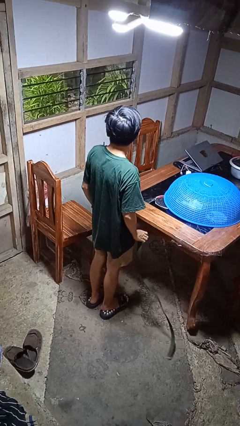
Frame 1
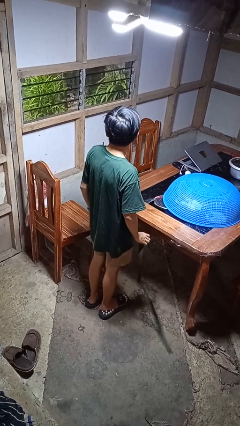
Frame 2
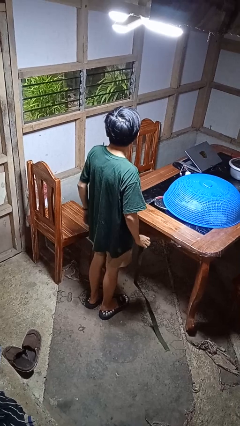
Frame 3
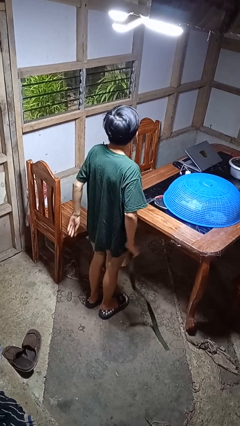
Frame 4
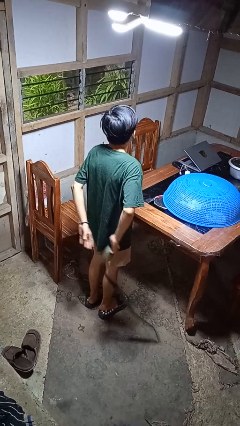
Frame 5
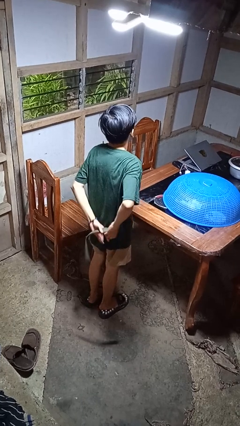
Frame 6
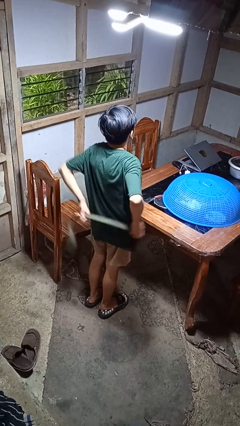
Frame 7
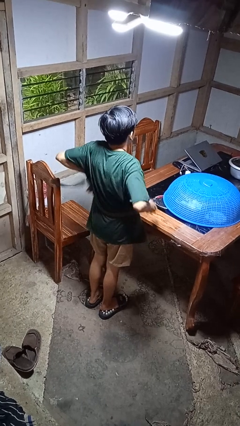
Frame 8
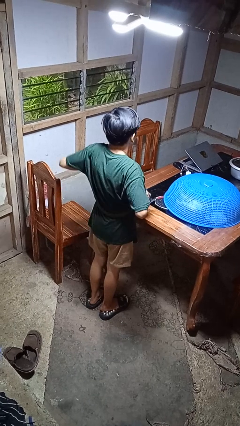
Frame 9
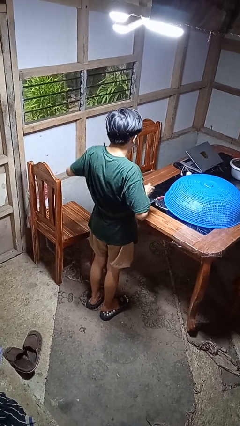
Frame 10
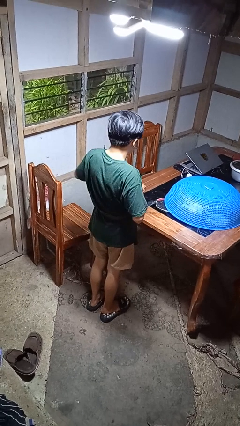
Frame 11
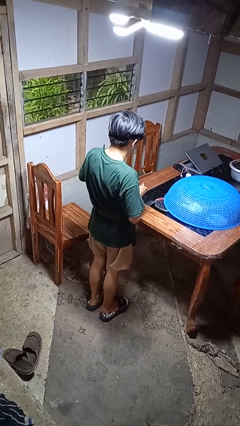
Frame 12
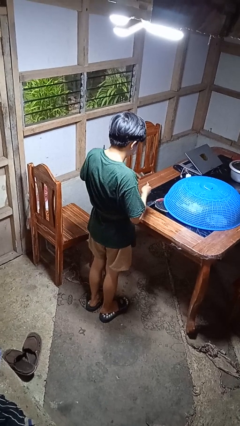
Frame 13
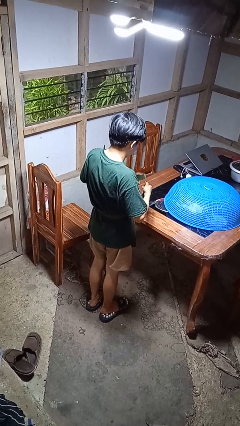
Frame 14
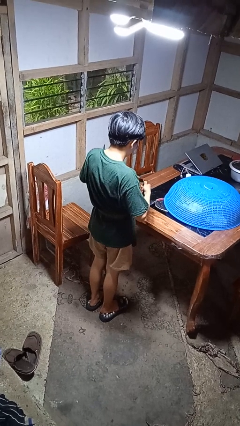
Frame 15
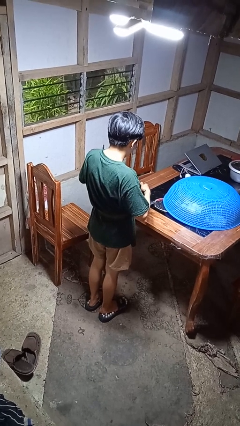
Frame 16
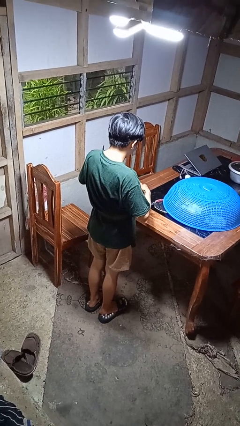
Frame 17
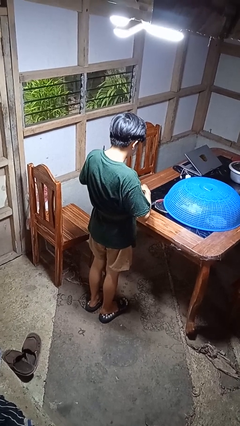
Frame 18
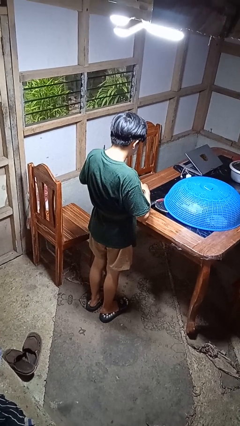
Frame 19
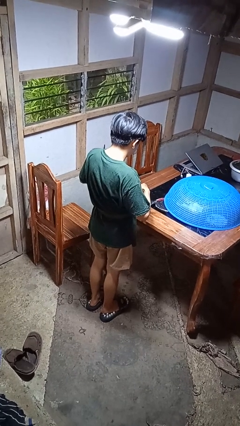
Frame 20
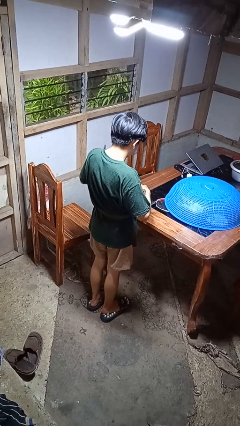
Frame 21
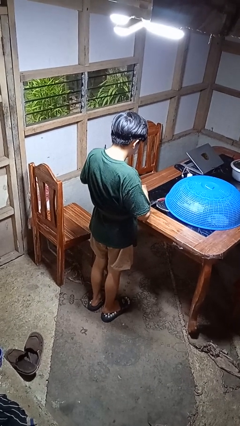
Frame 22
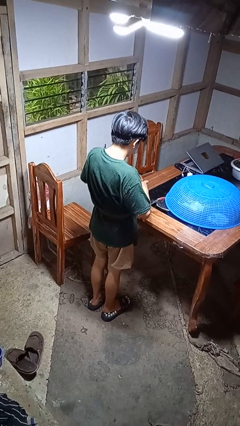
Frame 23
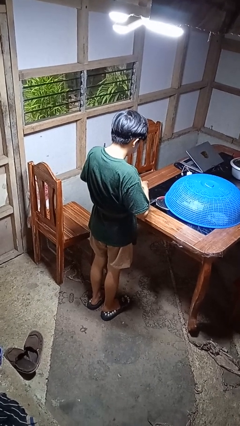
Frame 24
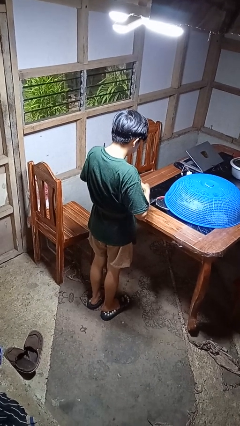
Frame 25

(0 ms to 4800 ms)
person puts on belt

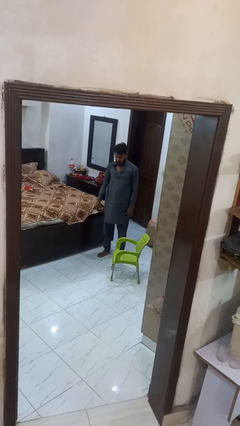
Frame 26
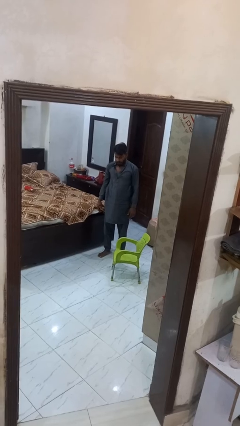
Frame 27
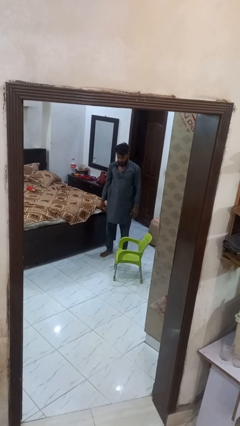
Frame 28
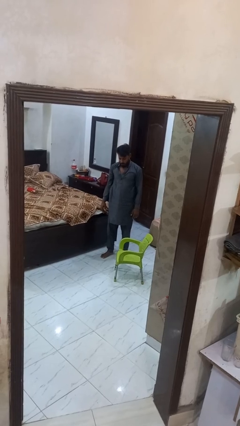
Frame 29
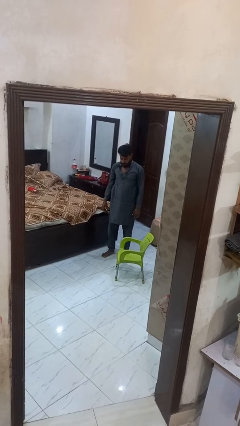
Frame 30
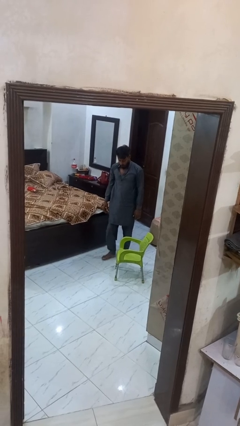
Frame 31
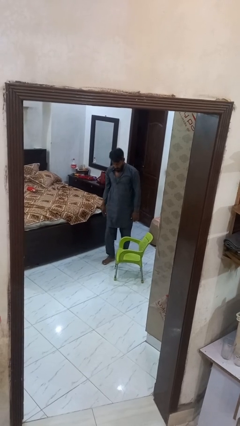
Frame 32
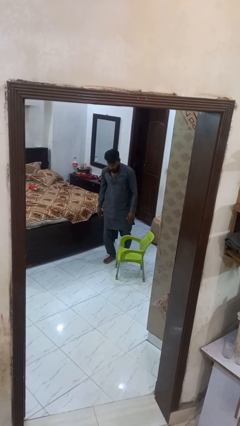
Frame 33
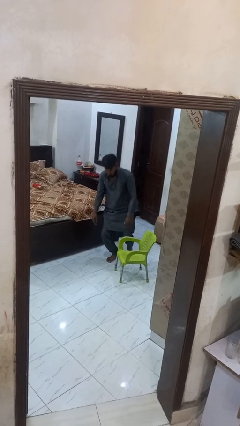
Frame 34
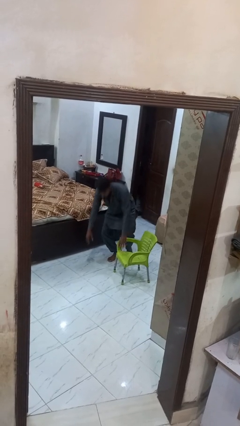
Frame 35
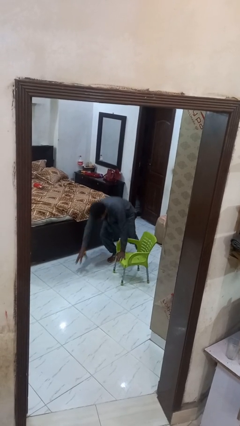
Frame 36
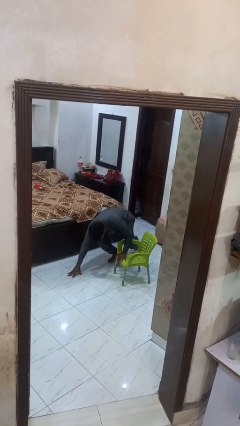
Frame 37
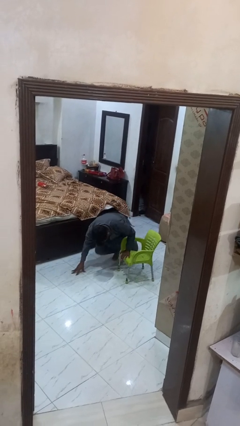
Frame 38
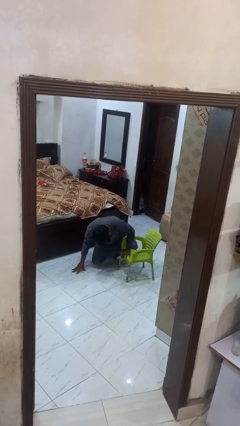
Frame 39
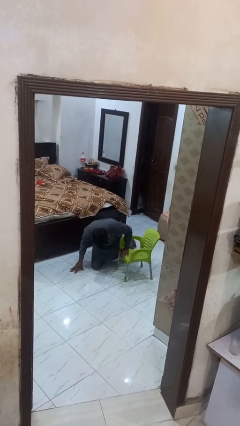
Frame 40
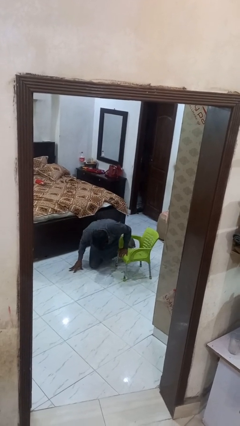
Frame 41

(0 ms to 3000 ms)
person trips on object on floor

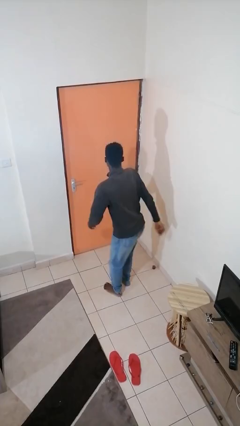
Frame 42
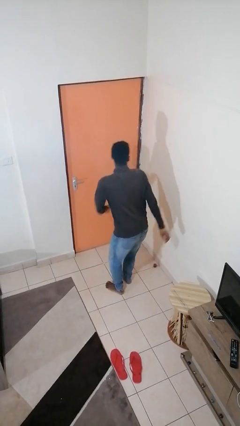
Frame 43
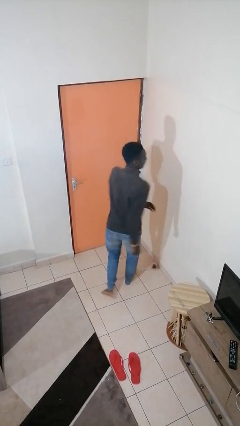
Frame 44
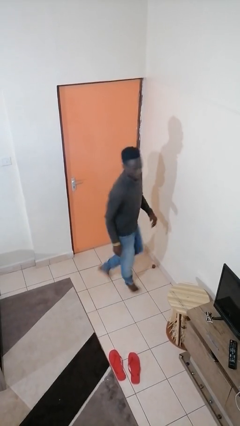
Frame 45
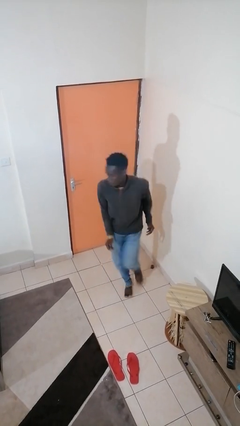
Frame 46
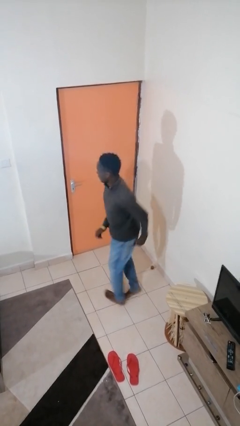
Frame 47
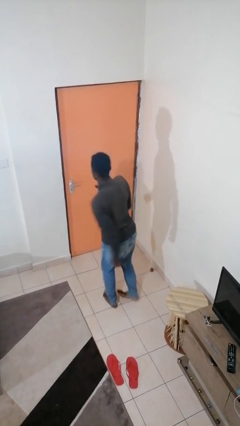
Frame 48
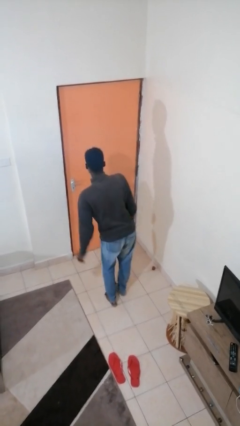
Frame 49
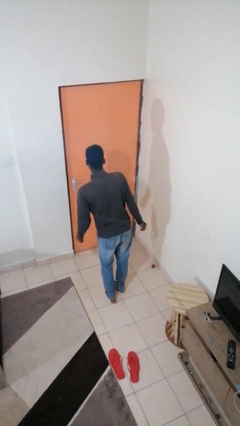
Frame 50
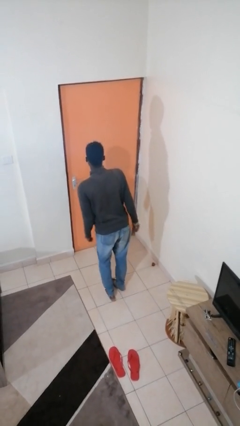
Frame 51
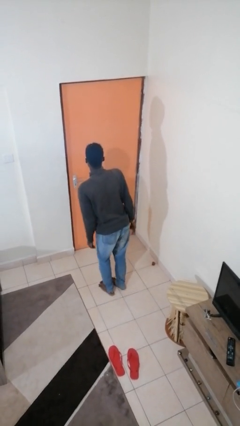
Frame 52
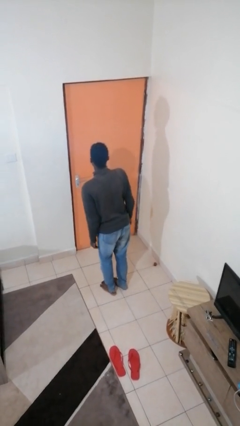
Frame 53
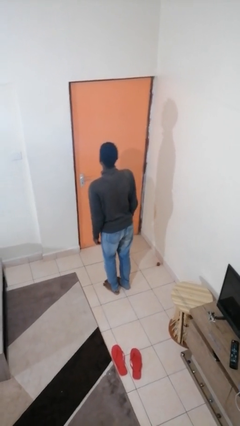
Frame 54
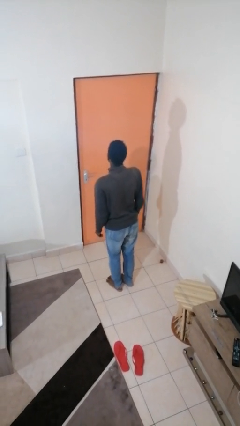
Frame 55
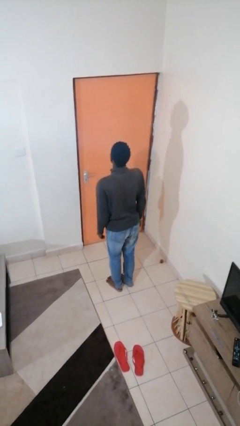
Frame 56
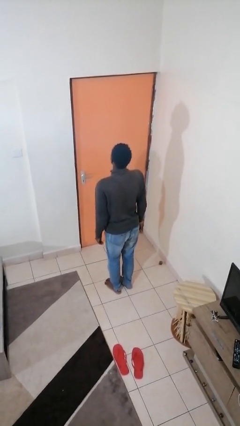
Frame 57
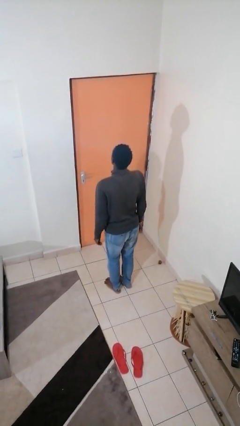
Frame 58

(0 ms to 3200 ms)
person twirls

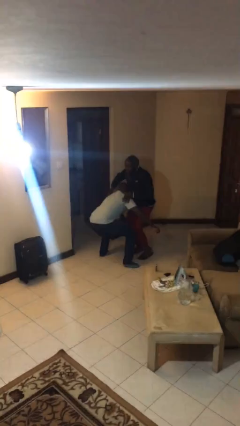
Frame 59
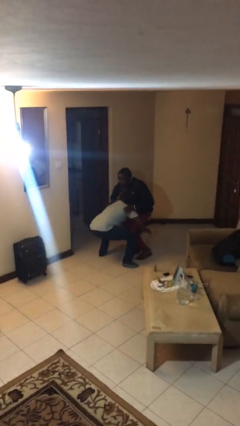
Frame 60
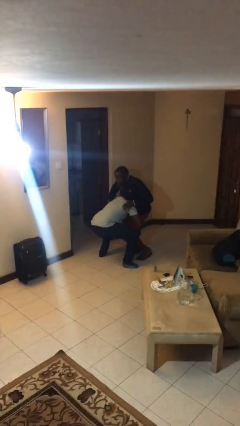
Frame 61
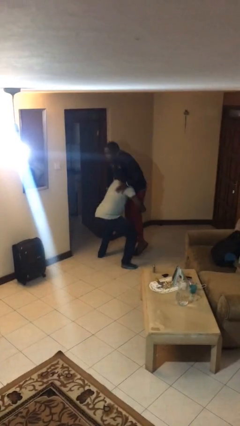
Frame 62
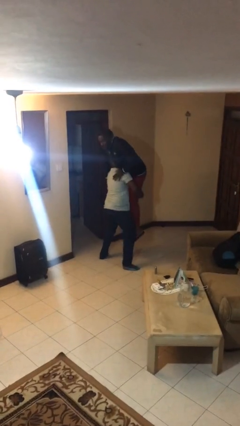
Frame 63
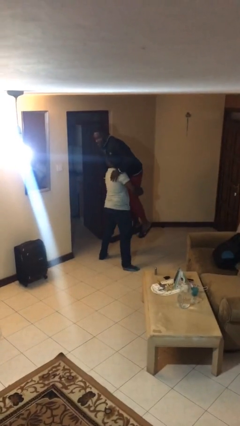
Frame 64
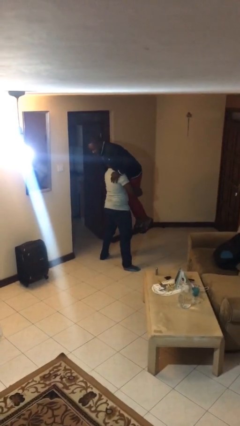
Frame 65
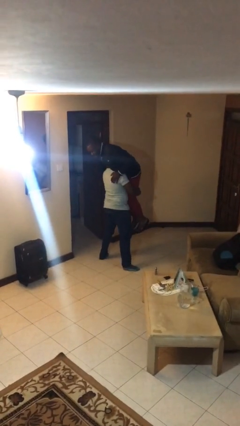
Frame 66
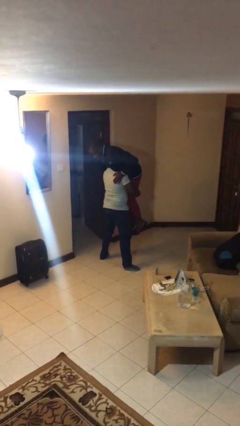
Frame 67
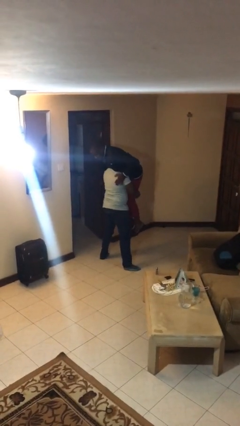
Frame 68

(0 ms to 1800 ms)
person picks up person

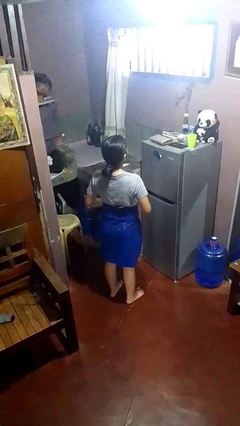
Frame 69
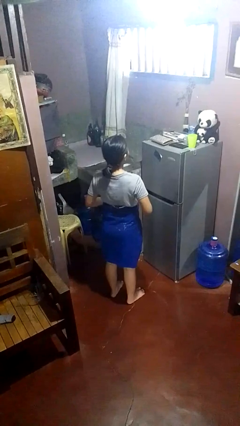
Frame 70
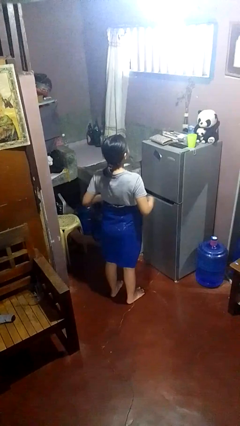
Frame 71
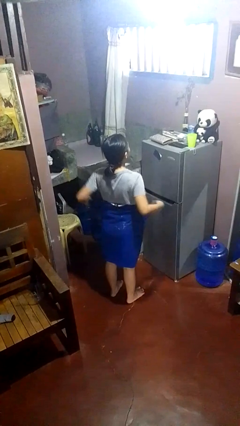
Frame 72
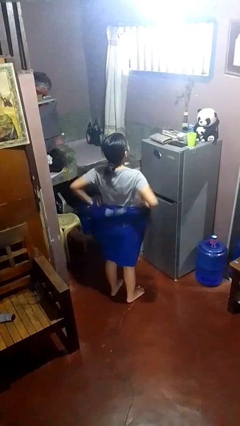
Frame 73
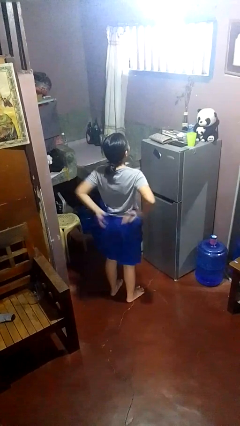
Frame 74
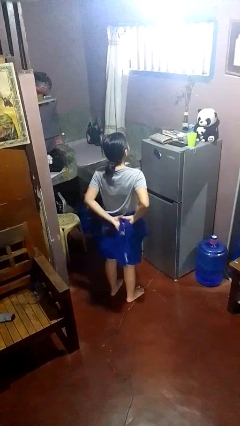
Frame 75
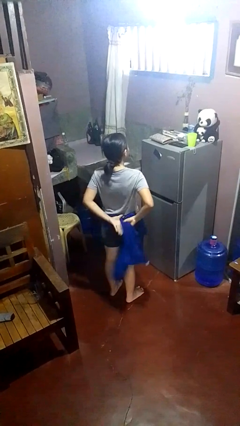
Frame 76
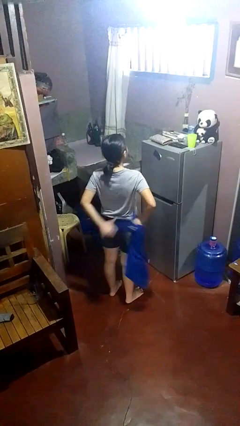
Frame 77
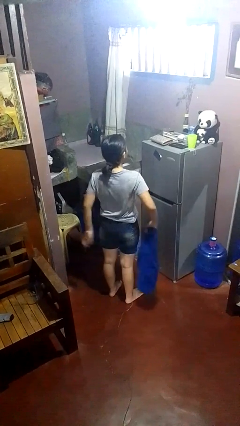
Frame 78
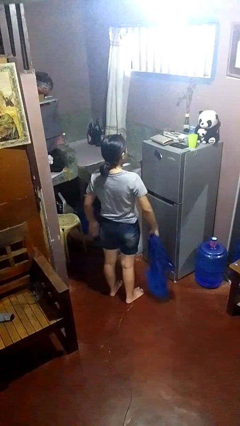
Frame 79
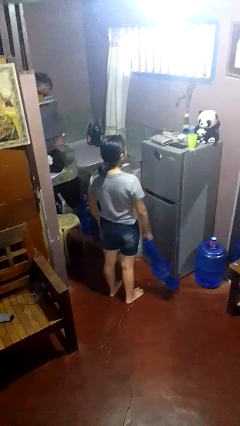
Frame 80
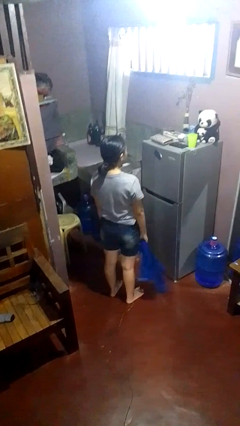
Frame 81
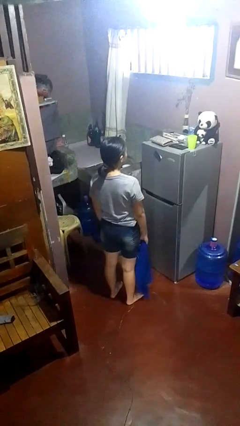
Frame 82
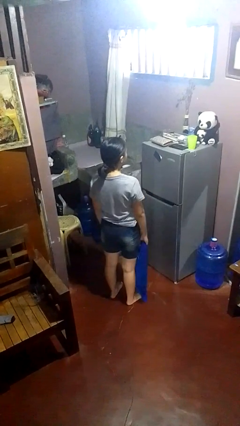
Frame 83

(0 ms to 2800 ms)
person unties jacket around waist

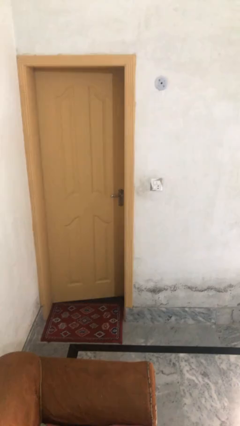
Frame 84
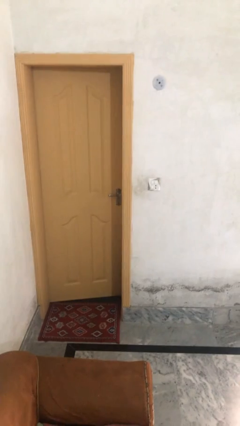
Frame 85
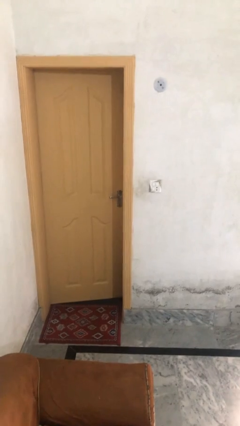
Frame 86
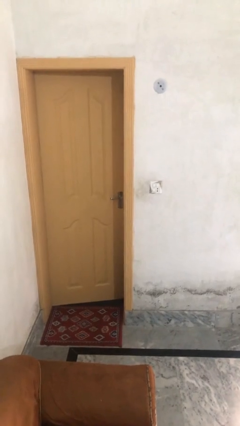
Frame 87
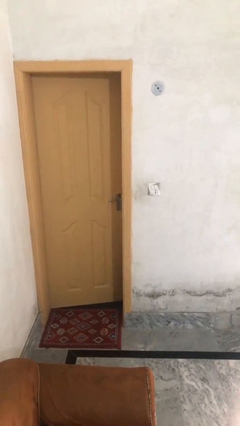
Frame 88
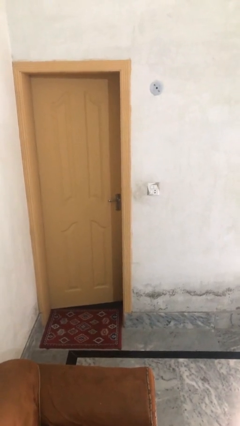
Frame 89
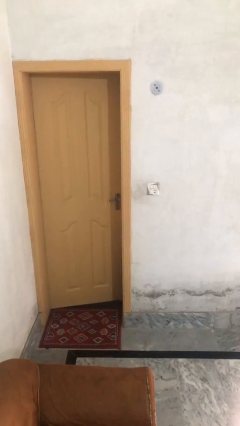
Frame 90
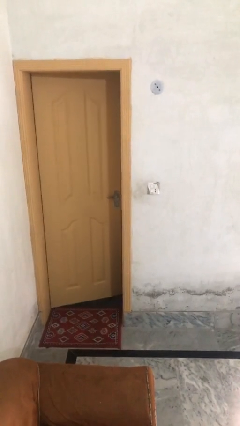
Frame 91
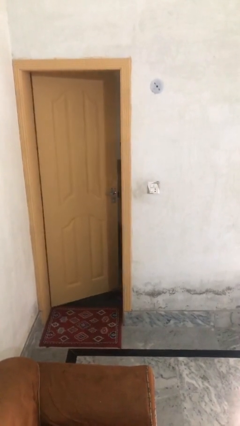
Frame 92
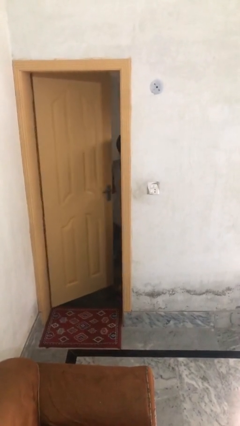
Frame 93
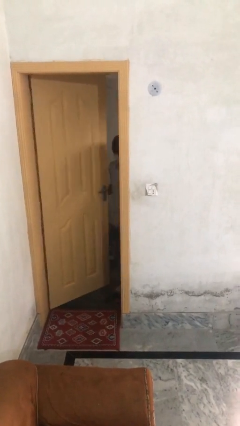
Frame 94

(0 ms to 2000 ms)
person opens facility door

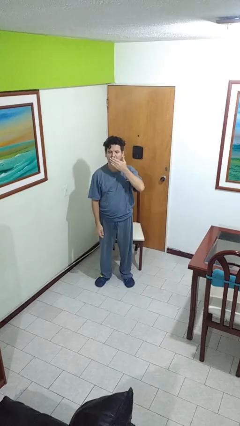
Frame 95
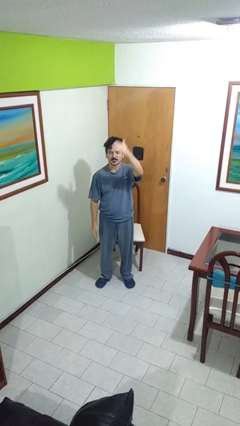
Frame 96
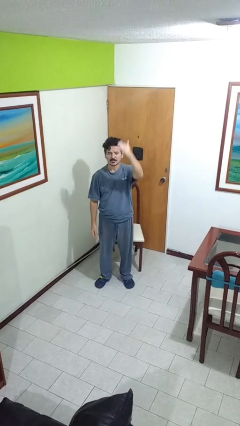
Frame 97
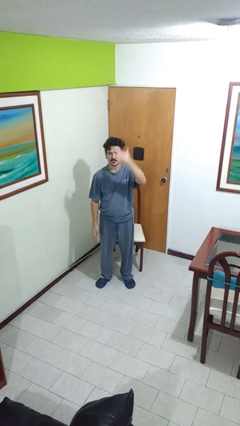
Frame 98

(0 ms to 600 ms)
person gestures blow kiss
